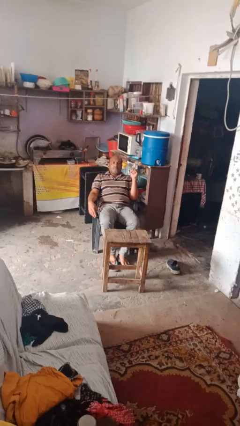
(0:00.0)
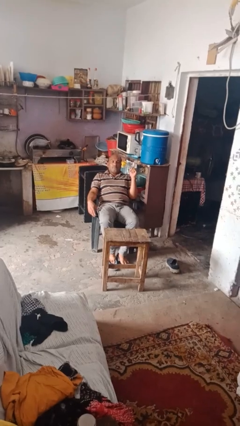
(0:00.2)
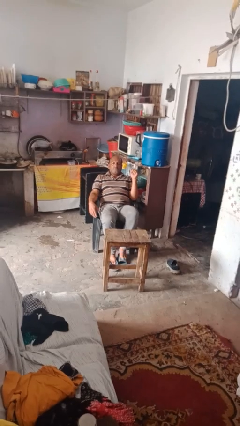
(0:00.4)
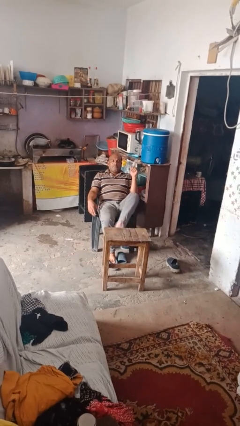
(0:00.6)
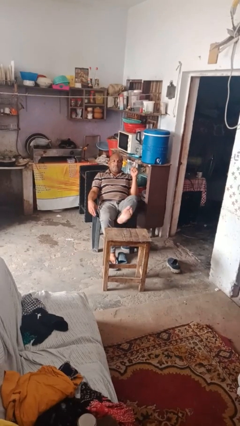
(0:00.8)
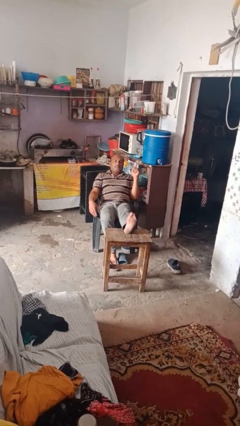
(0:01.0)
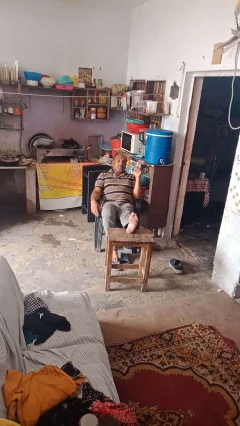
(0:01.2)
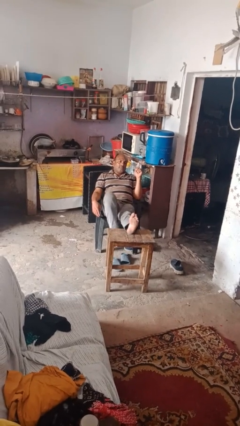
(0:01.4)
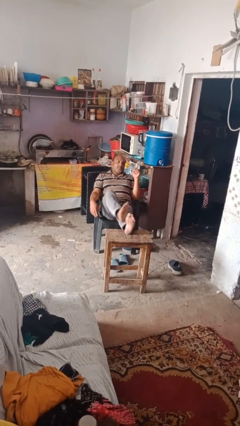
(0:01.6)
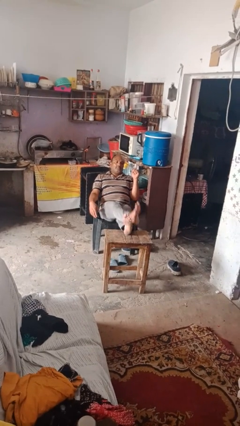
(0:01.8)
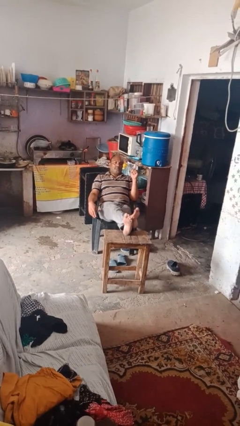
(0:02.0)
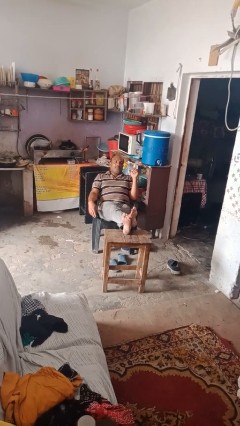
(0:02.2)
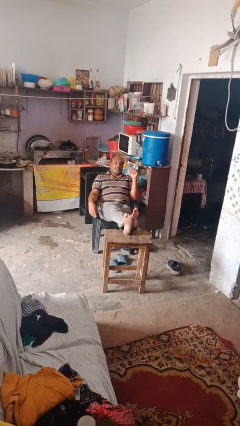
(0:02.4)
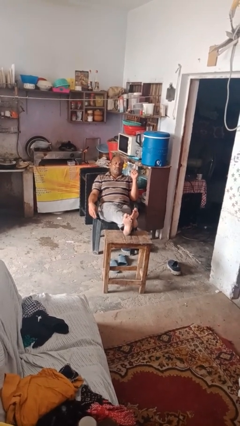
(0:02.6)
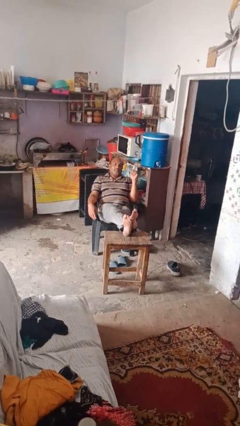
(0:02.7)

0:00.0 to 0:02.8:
person puts feet up

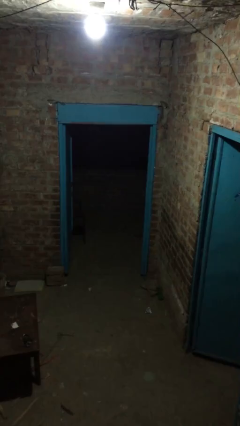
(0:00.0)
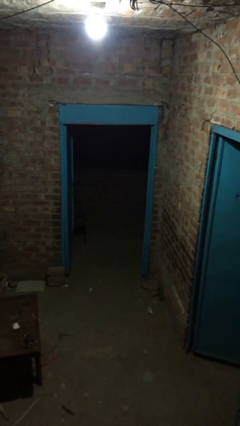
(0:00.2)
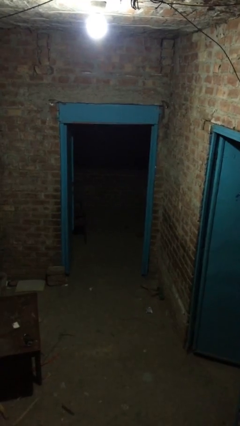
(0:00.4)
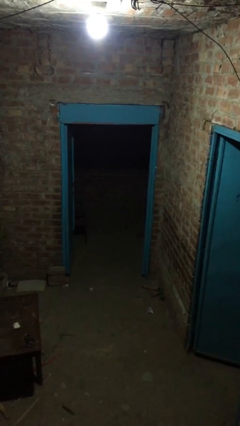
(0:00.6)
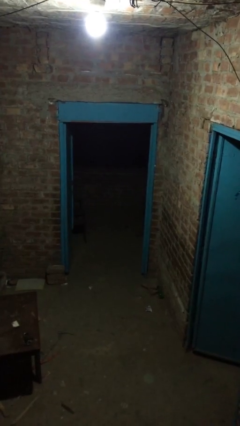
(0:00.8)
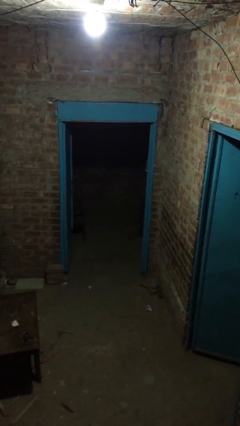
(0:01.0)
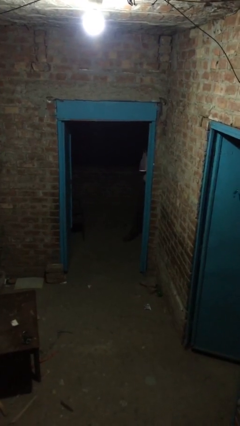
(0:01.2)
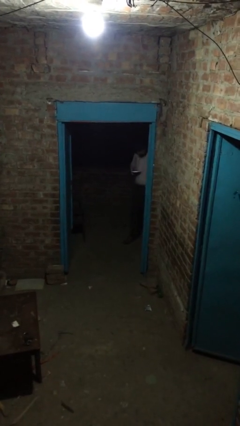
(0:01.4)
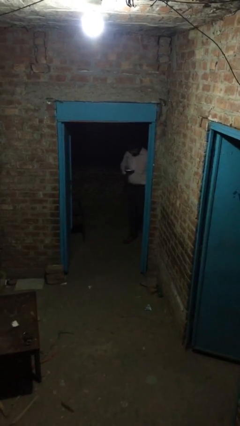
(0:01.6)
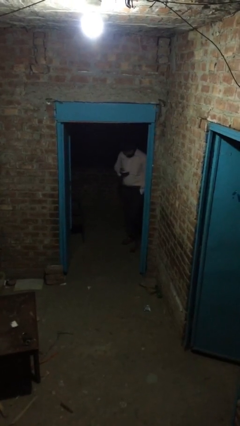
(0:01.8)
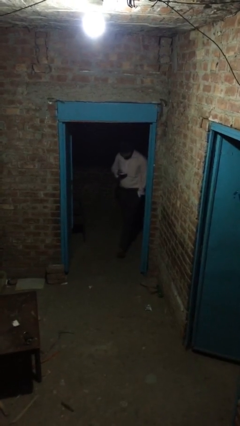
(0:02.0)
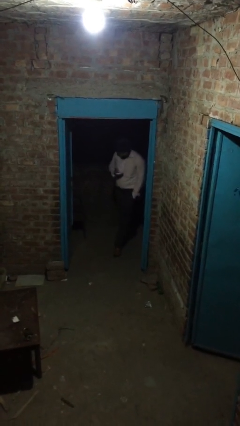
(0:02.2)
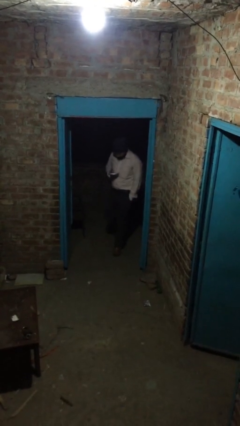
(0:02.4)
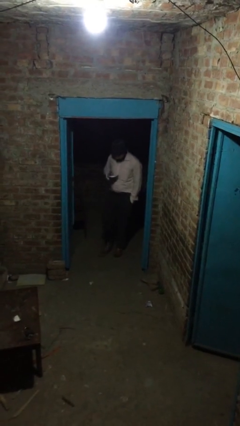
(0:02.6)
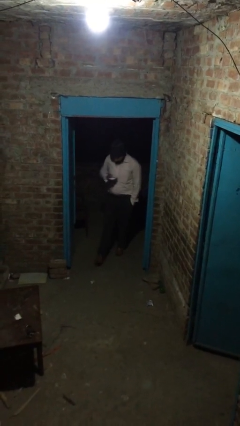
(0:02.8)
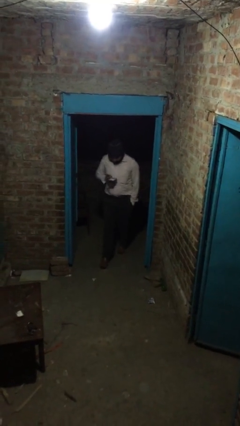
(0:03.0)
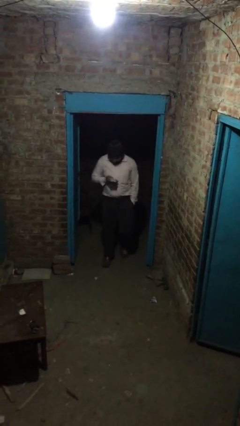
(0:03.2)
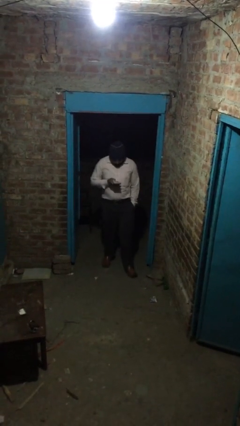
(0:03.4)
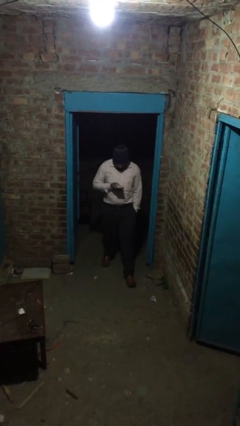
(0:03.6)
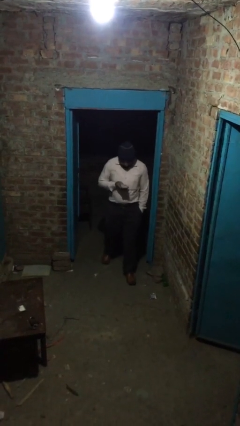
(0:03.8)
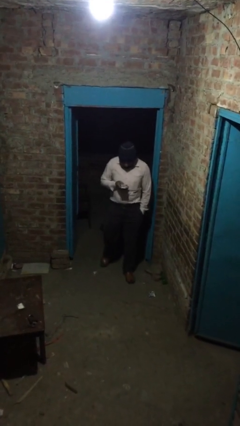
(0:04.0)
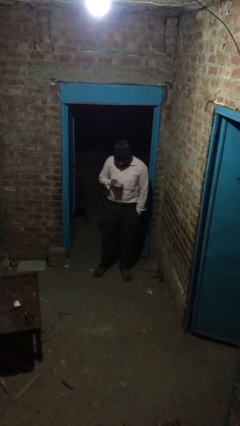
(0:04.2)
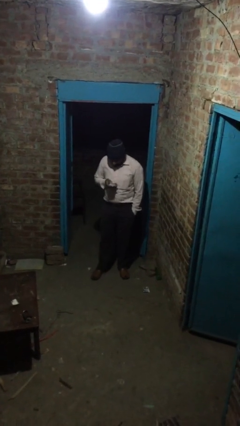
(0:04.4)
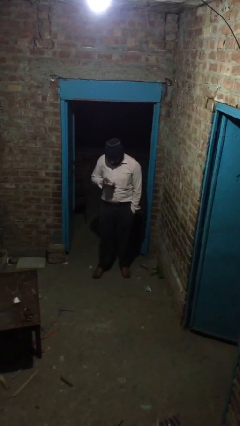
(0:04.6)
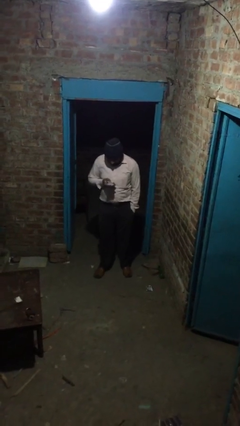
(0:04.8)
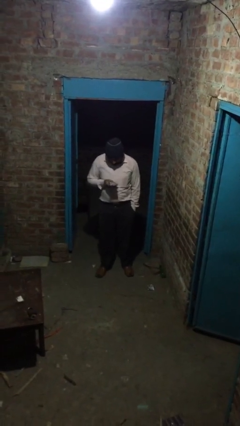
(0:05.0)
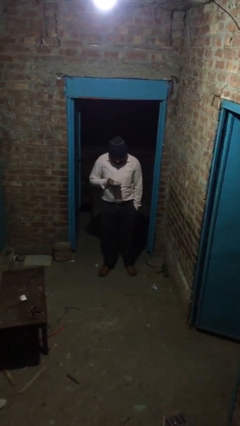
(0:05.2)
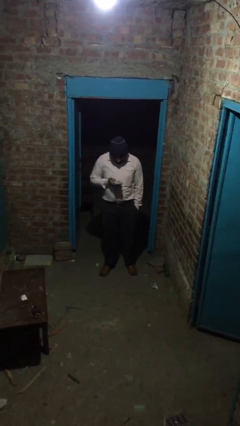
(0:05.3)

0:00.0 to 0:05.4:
person enters scene through structure

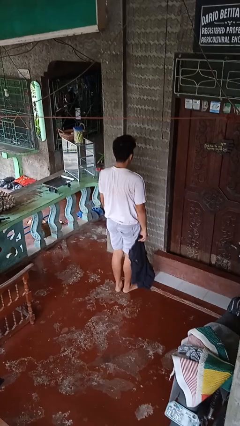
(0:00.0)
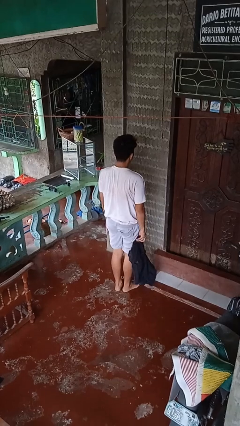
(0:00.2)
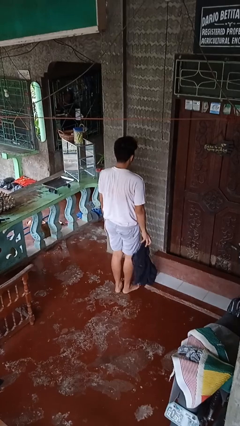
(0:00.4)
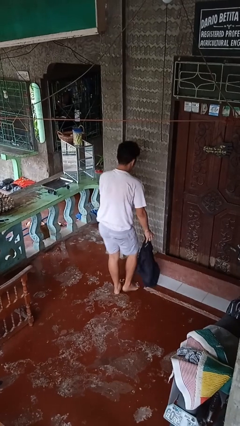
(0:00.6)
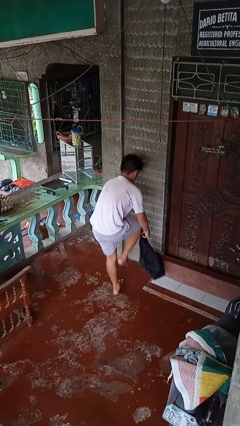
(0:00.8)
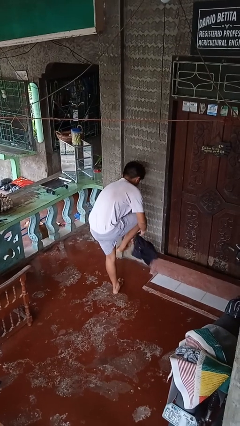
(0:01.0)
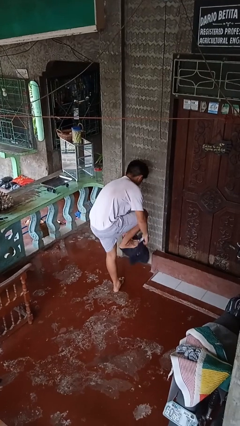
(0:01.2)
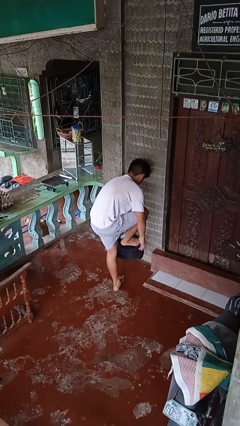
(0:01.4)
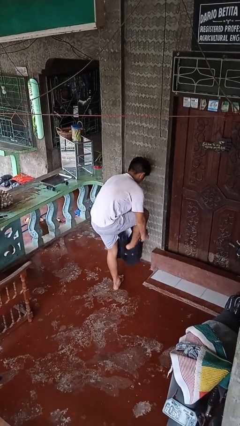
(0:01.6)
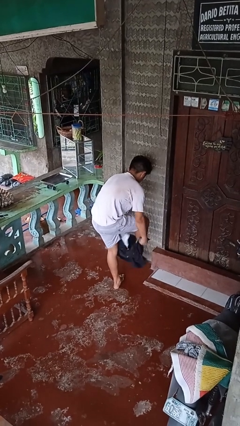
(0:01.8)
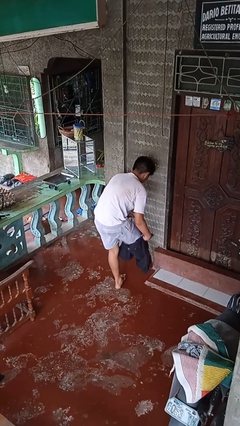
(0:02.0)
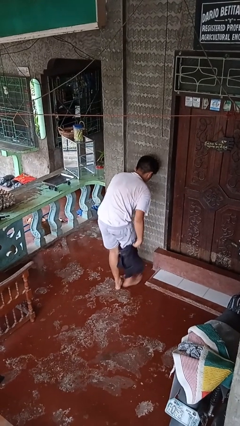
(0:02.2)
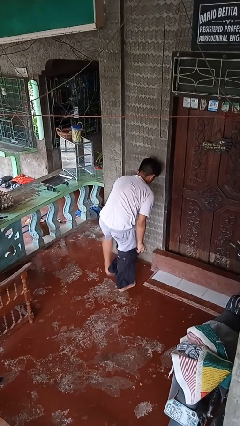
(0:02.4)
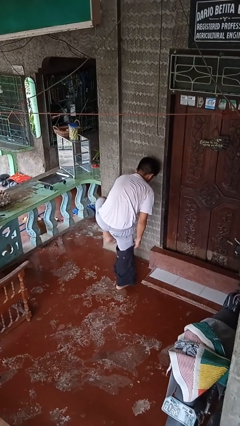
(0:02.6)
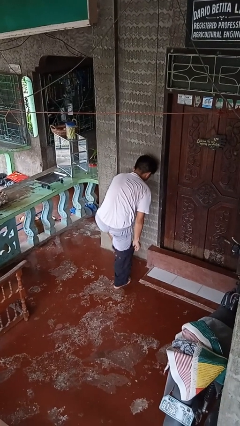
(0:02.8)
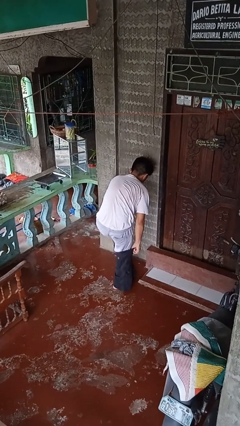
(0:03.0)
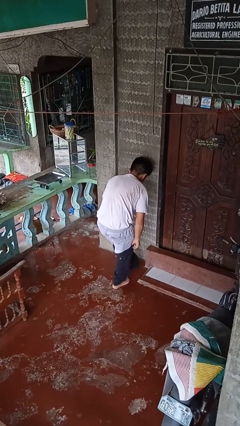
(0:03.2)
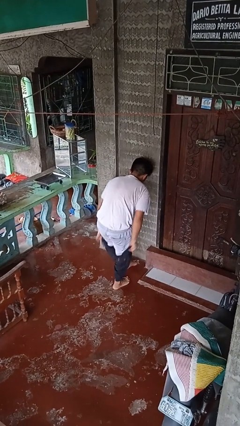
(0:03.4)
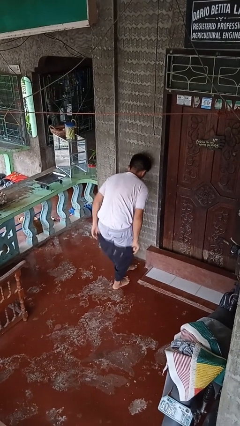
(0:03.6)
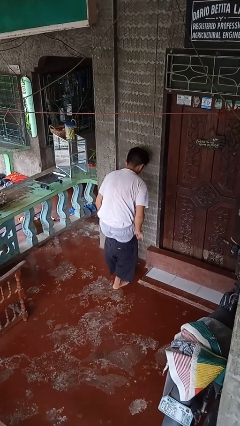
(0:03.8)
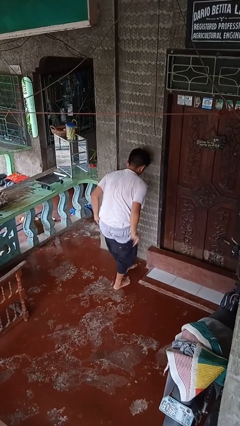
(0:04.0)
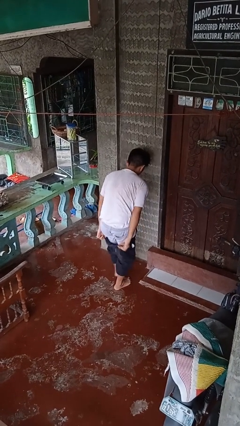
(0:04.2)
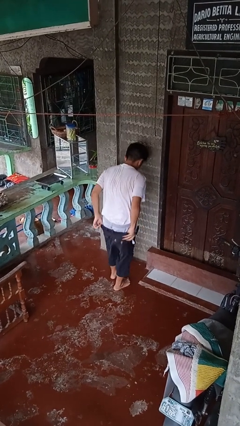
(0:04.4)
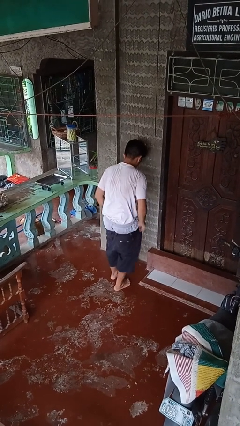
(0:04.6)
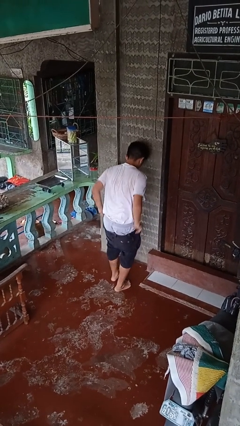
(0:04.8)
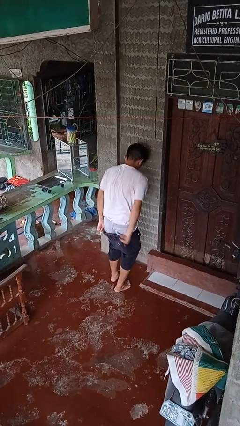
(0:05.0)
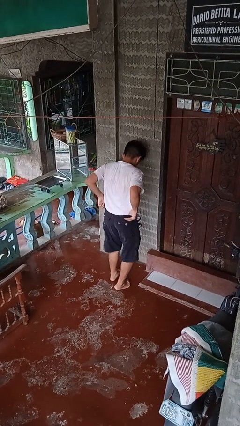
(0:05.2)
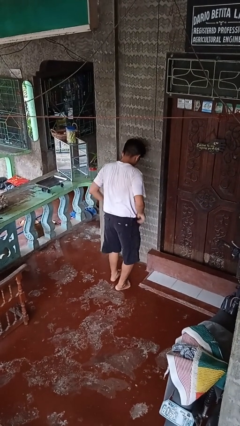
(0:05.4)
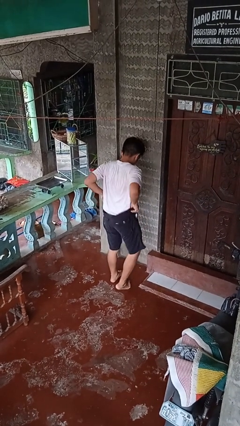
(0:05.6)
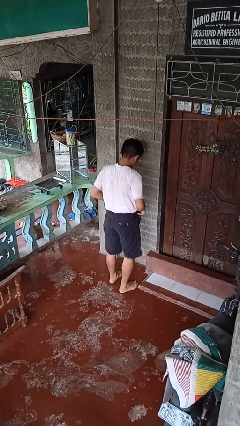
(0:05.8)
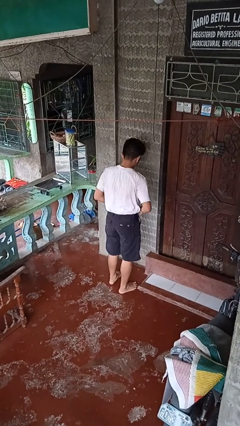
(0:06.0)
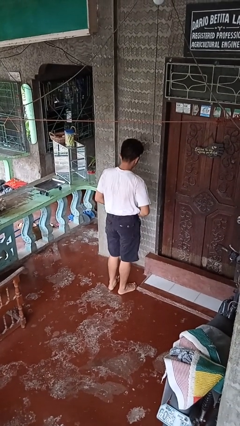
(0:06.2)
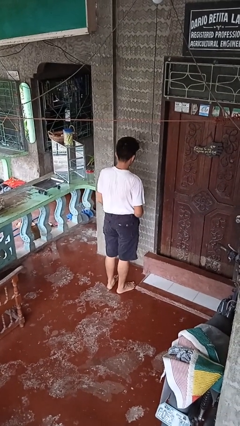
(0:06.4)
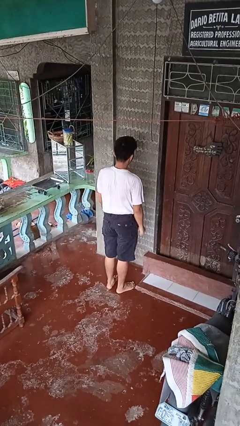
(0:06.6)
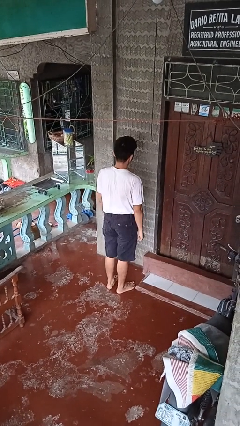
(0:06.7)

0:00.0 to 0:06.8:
person puts on pants

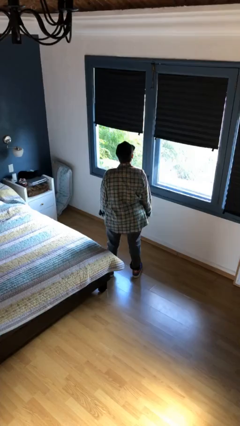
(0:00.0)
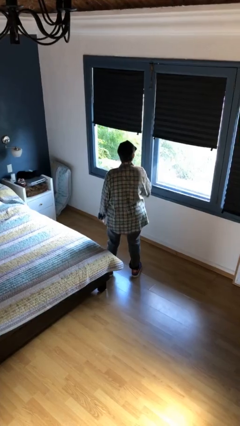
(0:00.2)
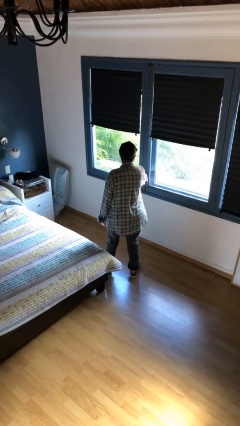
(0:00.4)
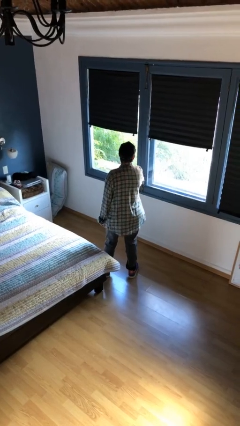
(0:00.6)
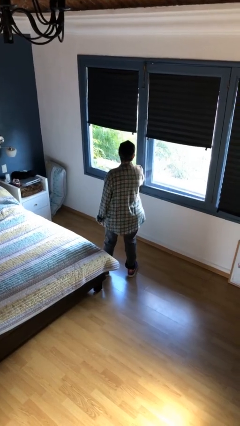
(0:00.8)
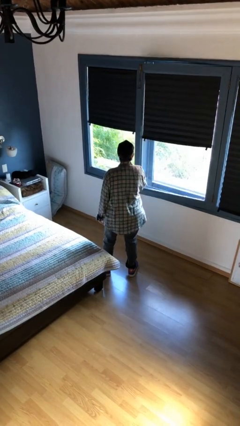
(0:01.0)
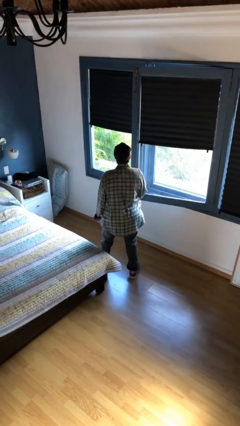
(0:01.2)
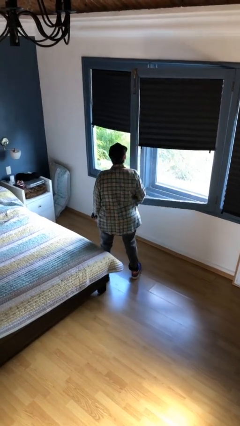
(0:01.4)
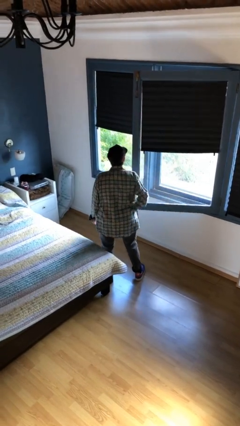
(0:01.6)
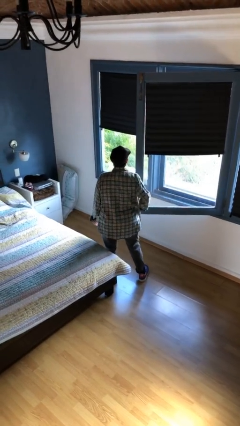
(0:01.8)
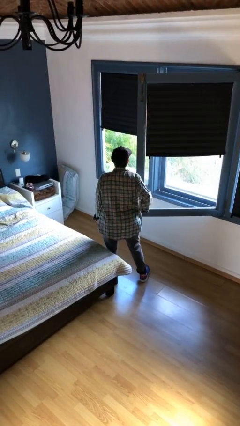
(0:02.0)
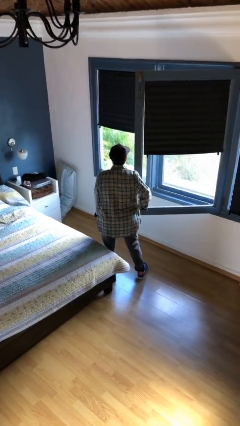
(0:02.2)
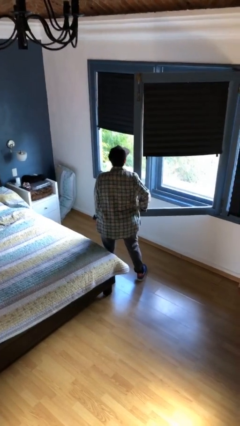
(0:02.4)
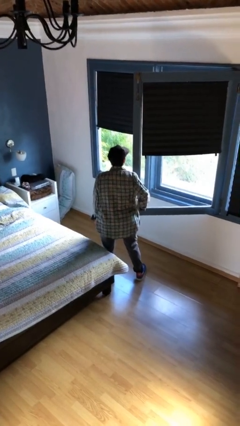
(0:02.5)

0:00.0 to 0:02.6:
person opens home window

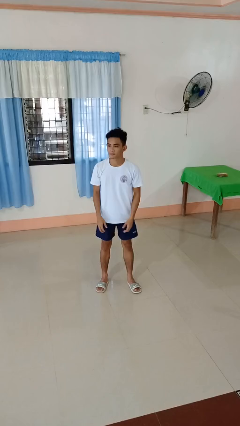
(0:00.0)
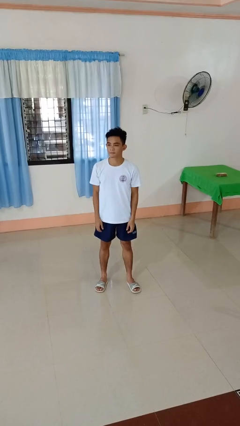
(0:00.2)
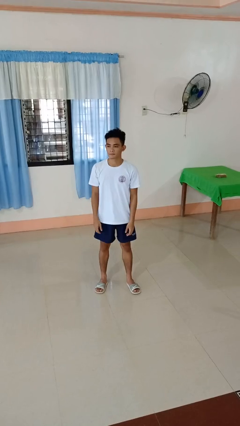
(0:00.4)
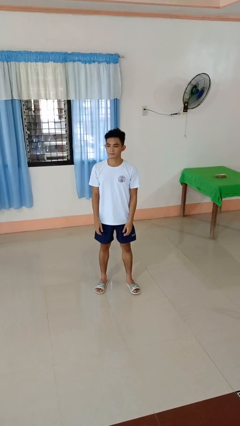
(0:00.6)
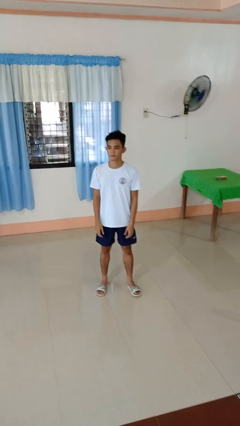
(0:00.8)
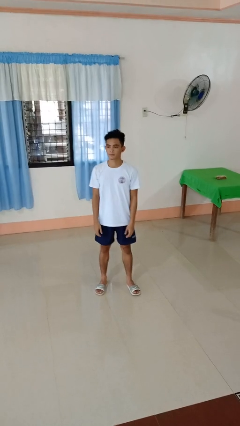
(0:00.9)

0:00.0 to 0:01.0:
person stands up
